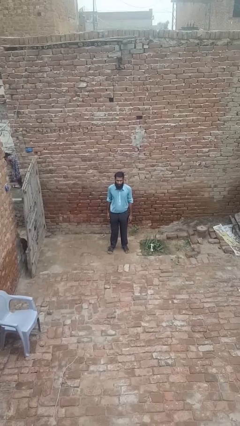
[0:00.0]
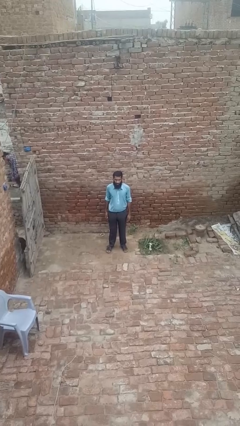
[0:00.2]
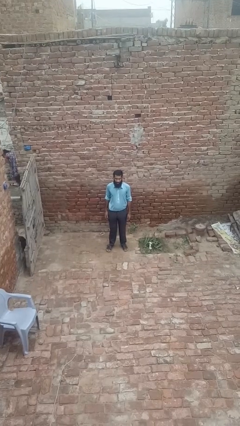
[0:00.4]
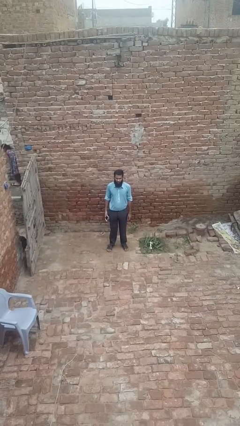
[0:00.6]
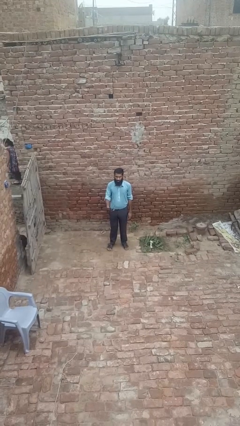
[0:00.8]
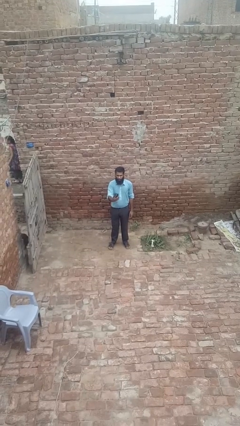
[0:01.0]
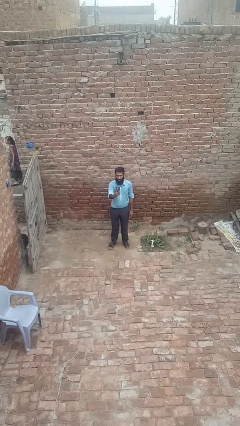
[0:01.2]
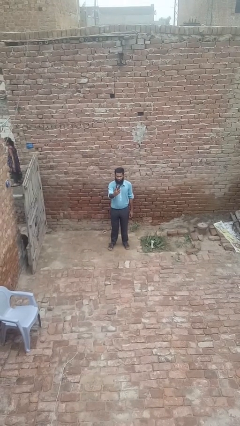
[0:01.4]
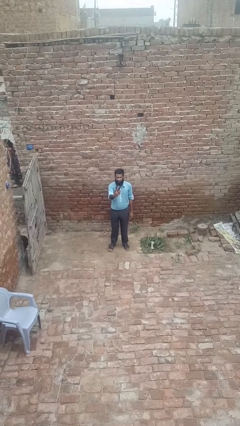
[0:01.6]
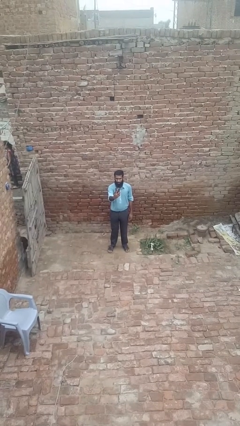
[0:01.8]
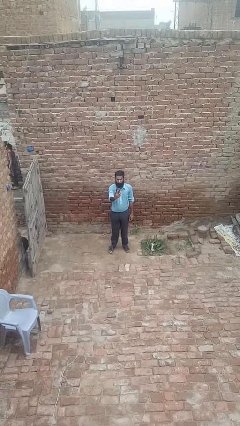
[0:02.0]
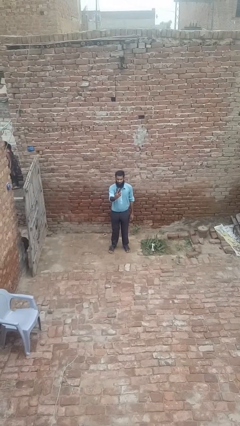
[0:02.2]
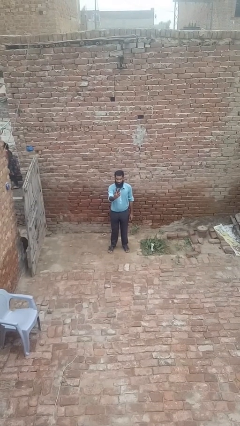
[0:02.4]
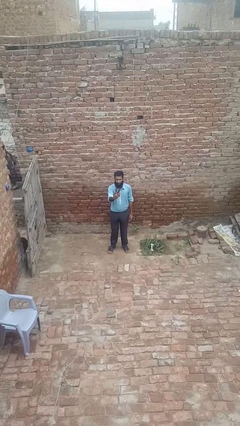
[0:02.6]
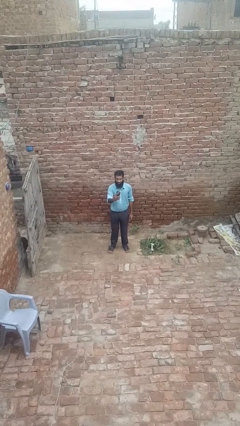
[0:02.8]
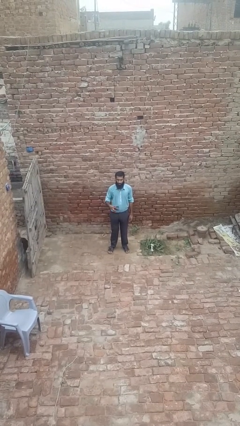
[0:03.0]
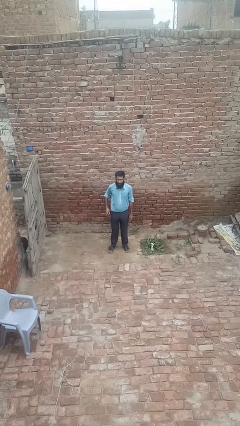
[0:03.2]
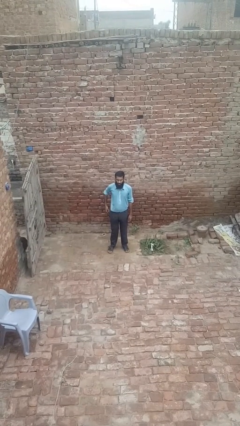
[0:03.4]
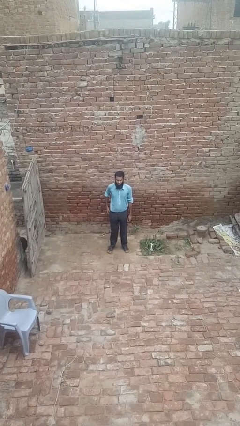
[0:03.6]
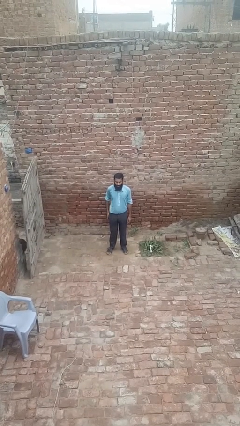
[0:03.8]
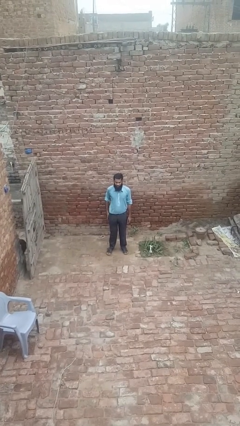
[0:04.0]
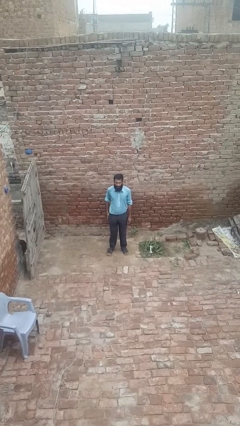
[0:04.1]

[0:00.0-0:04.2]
person puts phone into pocket

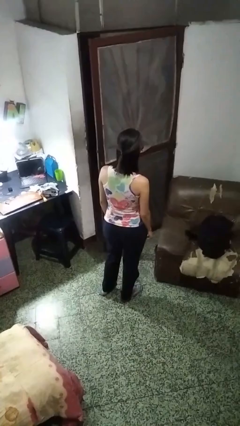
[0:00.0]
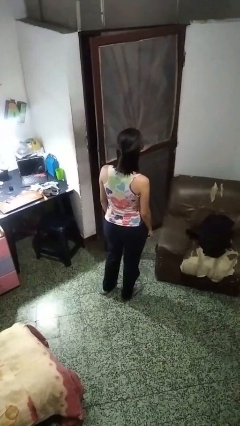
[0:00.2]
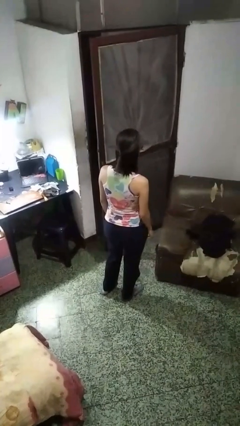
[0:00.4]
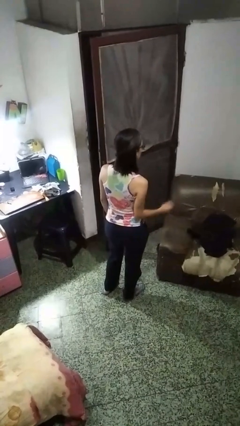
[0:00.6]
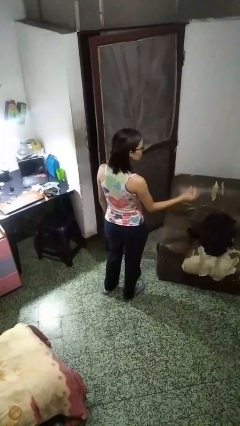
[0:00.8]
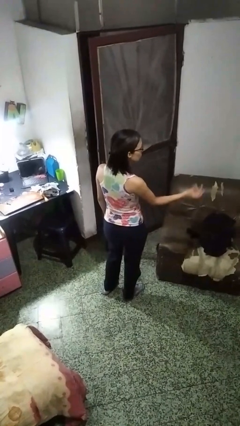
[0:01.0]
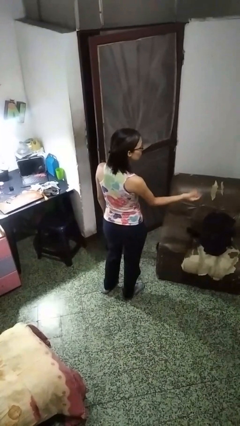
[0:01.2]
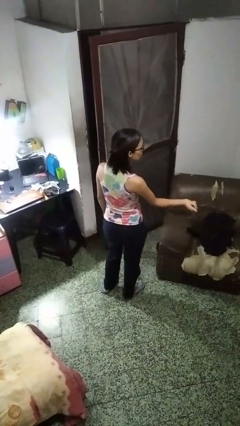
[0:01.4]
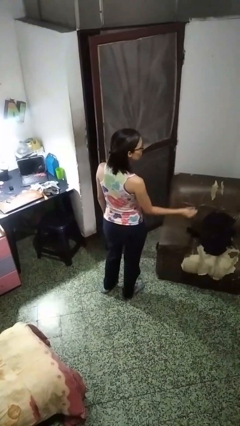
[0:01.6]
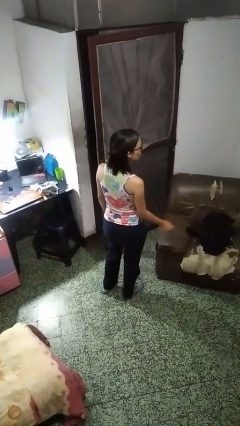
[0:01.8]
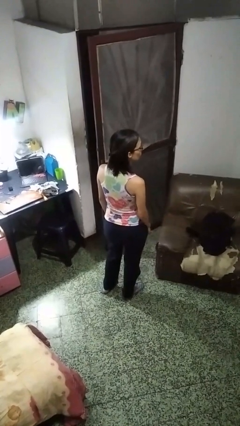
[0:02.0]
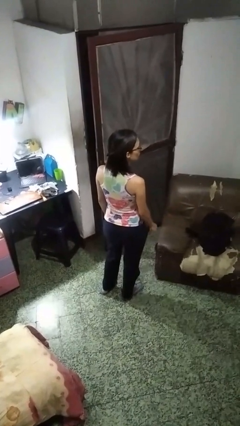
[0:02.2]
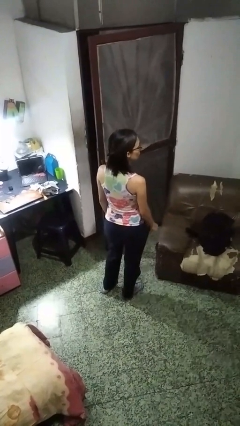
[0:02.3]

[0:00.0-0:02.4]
person snaps fingers

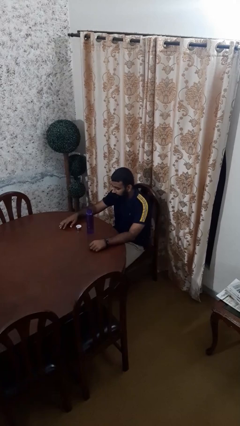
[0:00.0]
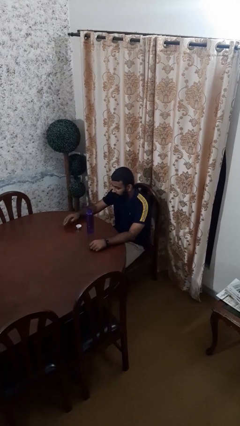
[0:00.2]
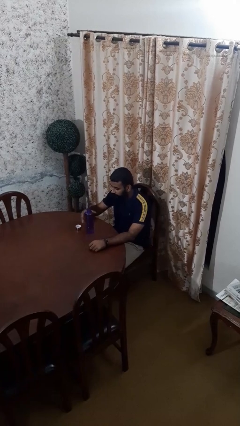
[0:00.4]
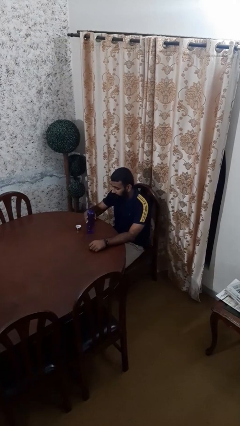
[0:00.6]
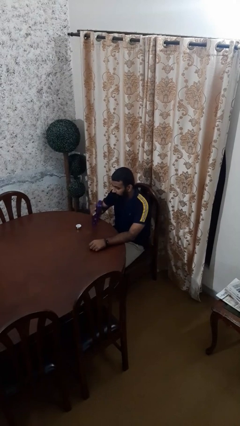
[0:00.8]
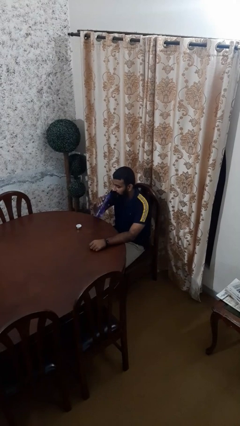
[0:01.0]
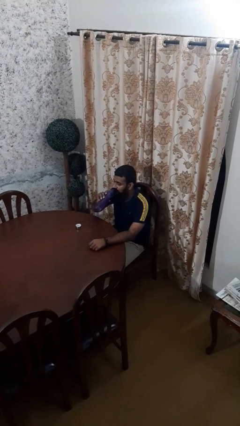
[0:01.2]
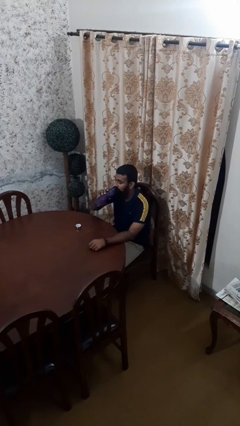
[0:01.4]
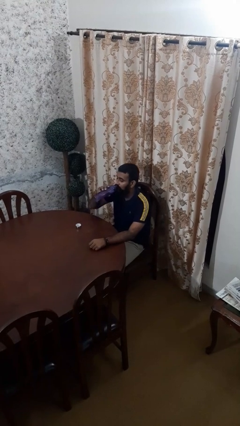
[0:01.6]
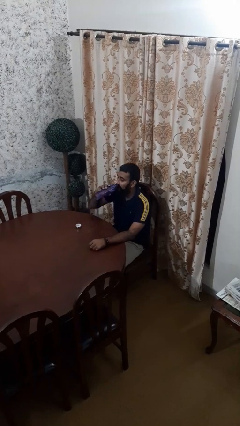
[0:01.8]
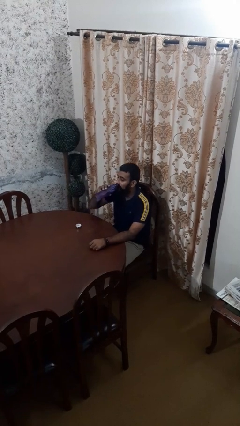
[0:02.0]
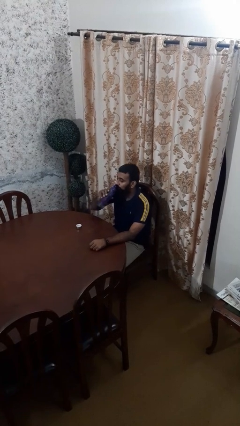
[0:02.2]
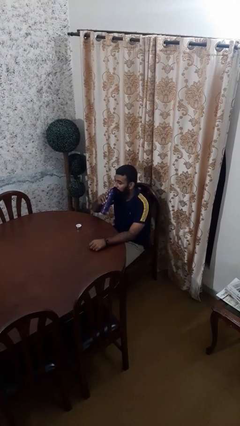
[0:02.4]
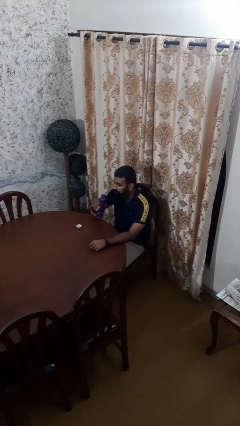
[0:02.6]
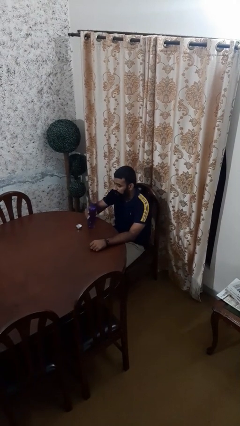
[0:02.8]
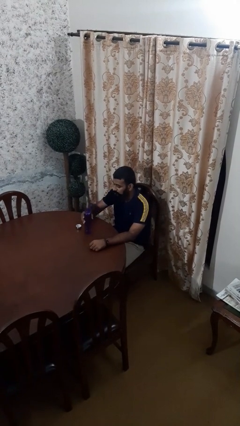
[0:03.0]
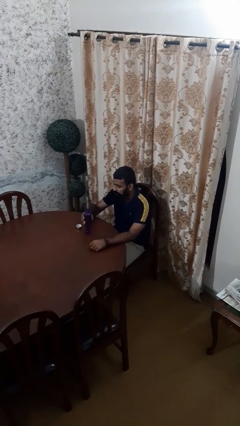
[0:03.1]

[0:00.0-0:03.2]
person drinks from bottle

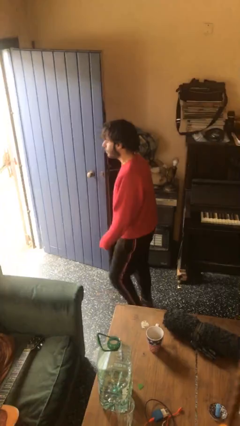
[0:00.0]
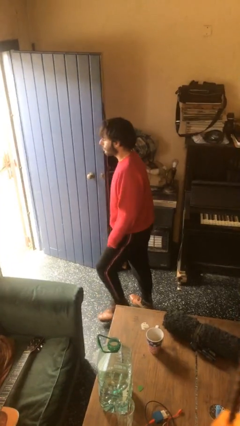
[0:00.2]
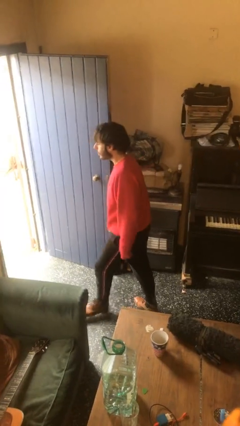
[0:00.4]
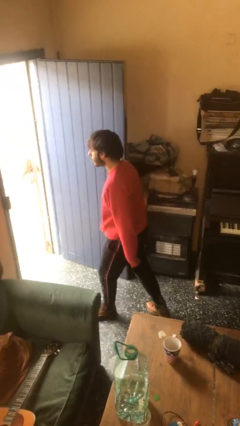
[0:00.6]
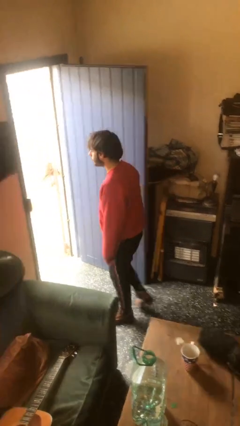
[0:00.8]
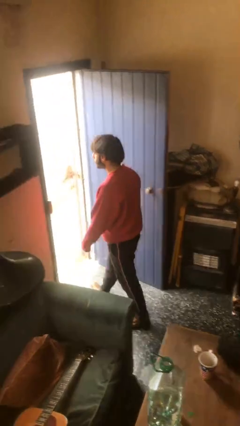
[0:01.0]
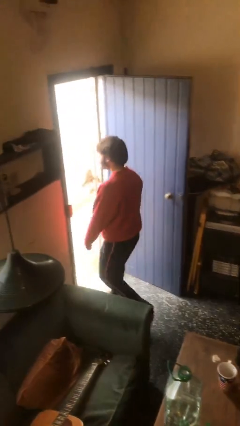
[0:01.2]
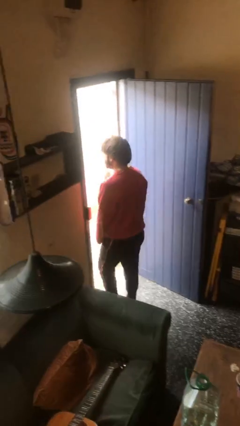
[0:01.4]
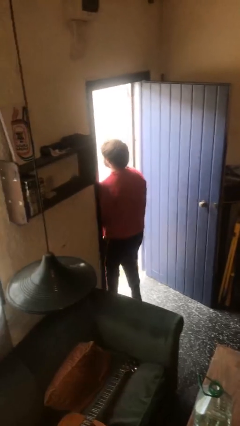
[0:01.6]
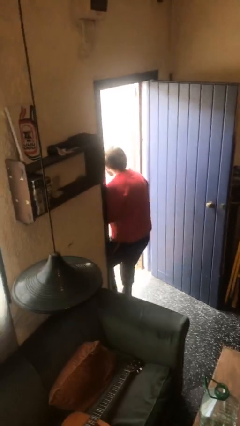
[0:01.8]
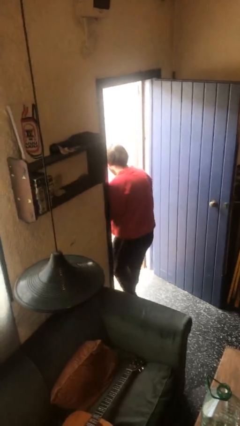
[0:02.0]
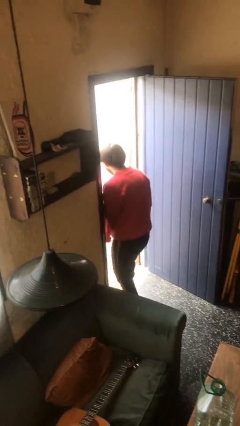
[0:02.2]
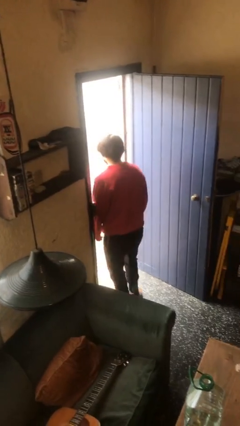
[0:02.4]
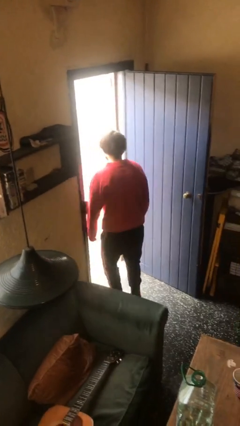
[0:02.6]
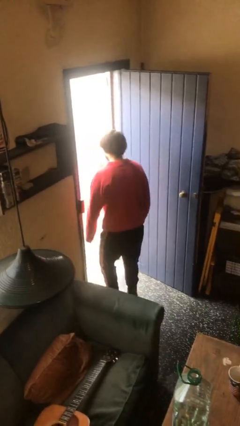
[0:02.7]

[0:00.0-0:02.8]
person bumps into wall

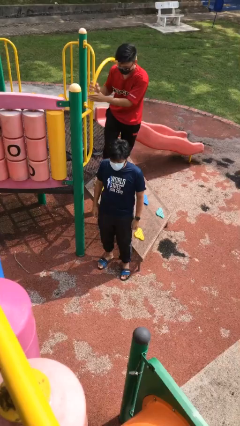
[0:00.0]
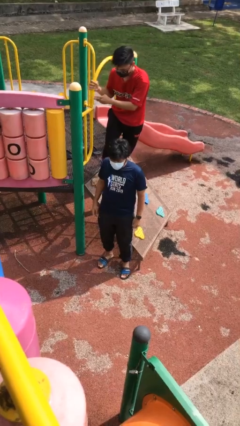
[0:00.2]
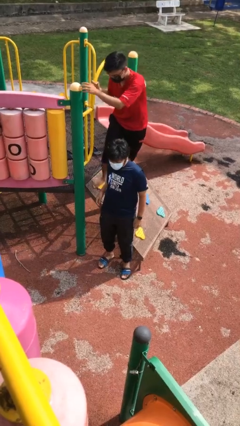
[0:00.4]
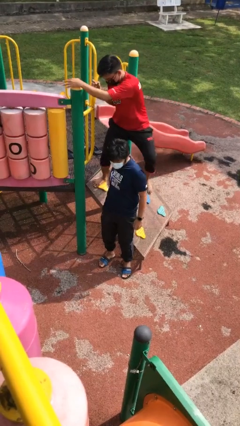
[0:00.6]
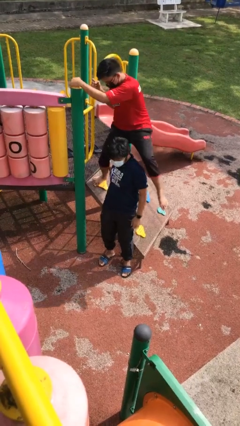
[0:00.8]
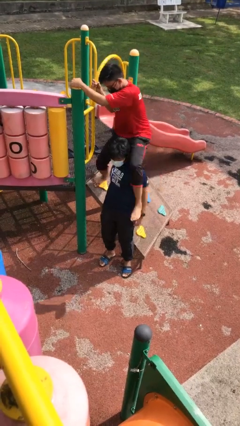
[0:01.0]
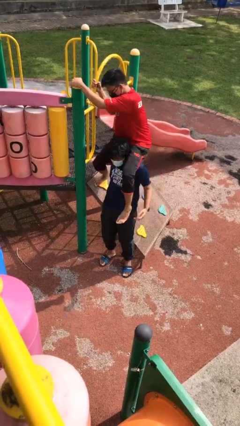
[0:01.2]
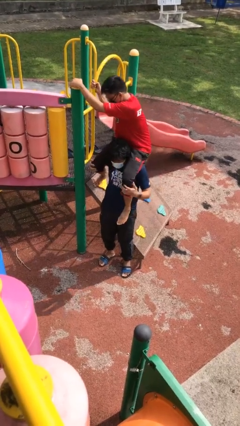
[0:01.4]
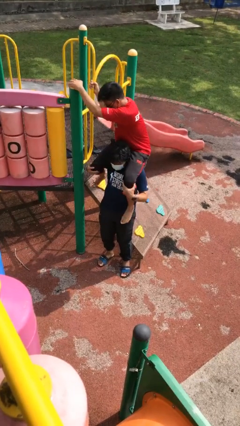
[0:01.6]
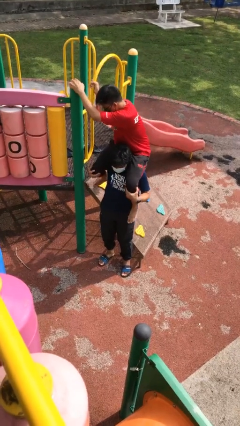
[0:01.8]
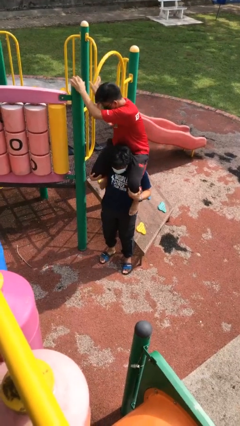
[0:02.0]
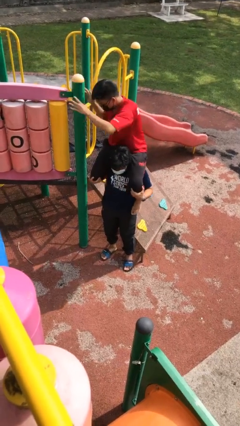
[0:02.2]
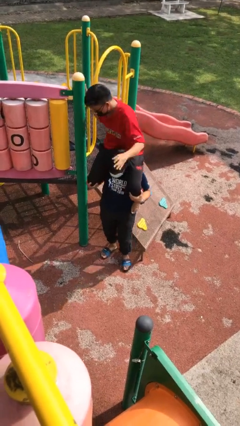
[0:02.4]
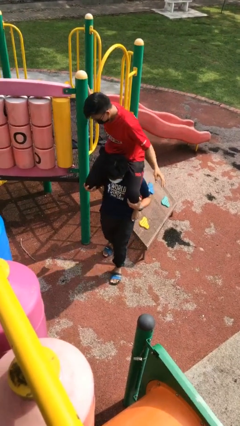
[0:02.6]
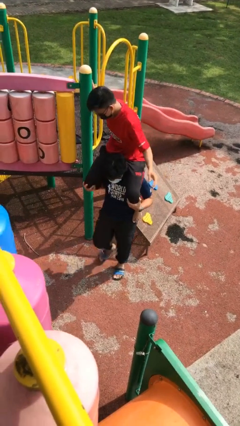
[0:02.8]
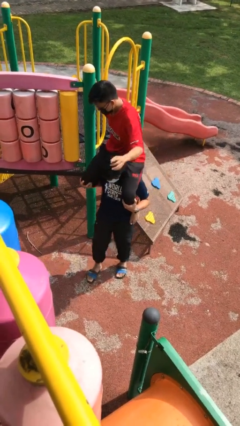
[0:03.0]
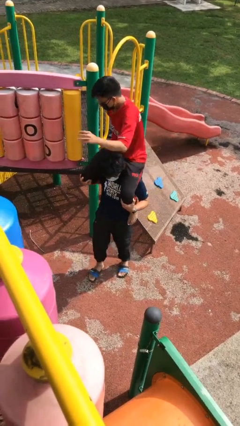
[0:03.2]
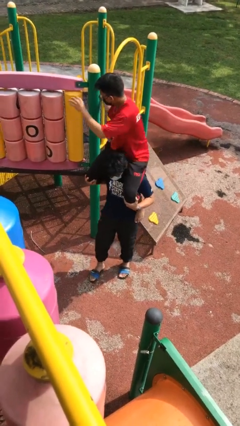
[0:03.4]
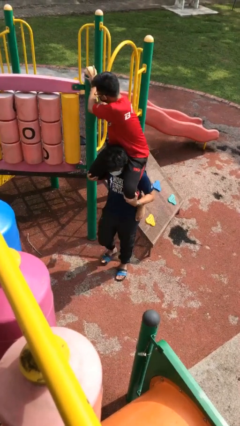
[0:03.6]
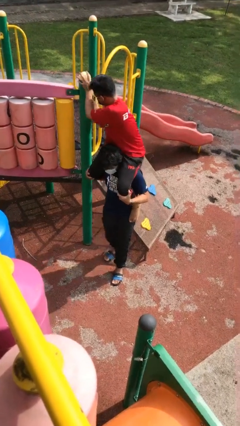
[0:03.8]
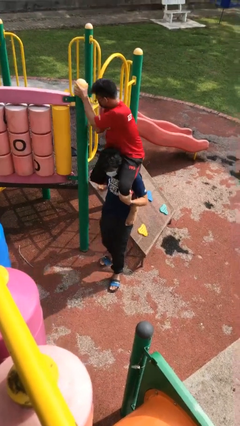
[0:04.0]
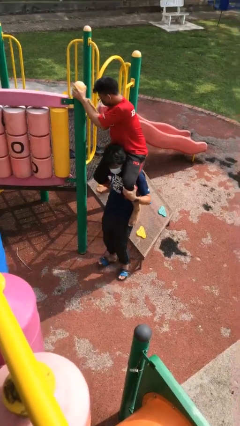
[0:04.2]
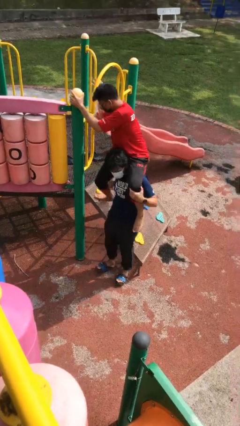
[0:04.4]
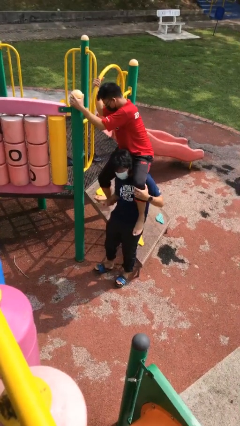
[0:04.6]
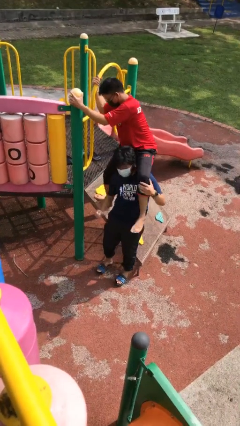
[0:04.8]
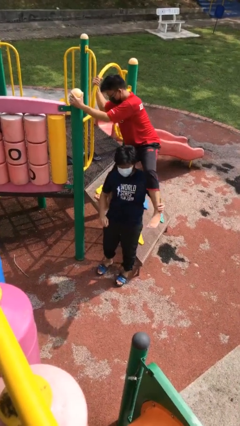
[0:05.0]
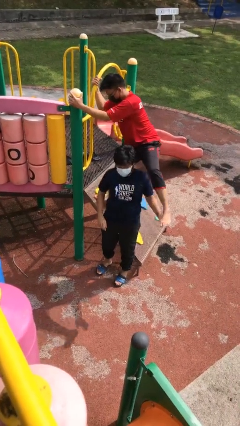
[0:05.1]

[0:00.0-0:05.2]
person carries person on shoulders
